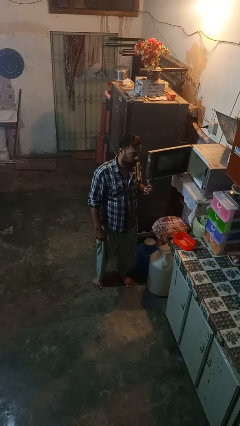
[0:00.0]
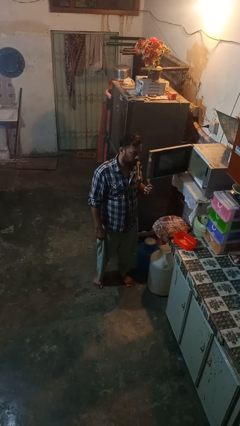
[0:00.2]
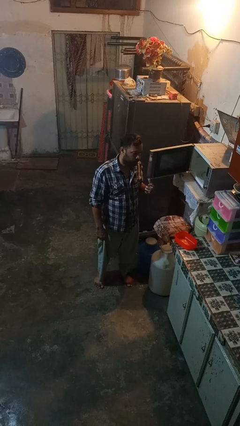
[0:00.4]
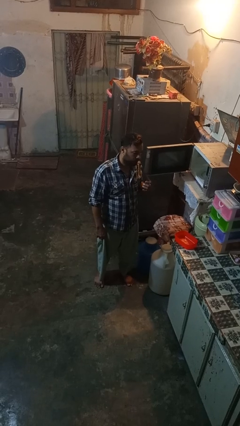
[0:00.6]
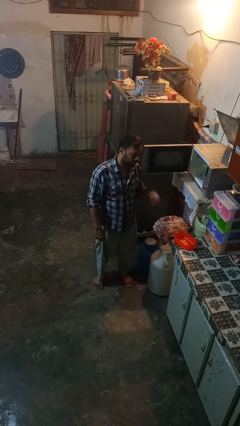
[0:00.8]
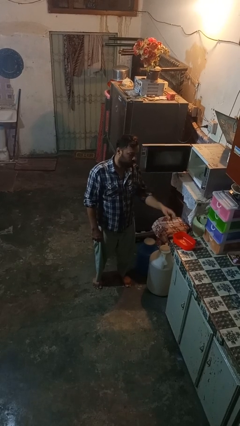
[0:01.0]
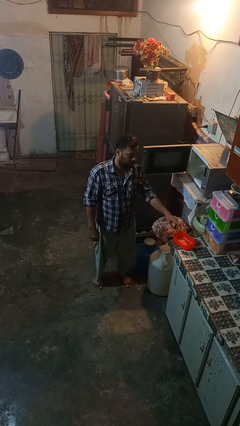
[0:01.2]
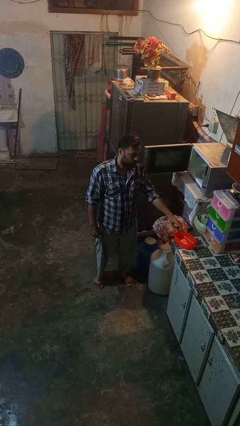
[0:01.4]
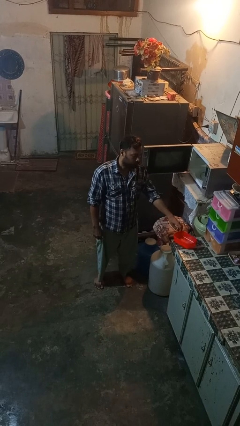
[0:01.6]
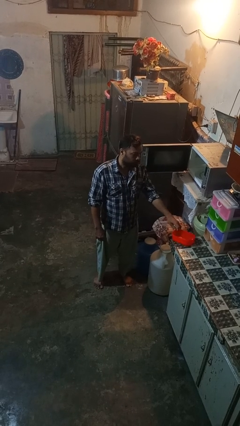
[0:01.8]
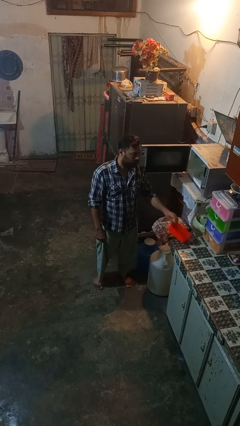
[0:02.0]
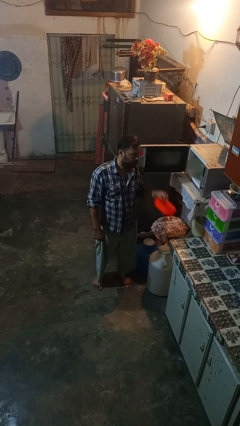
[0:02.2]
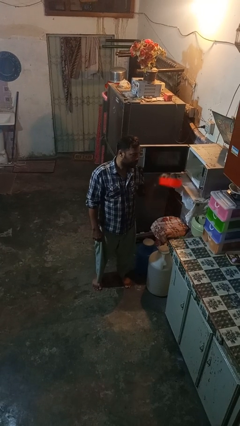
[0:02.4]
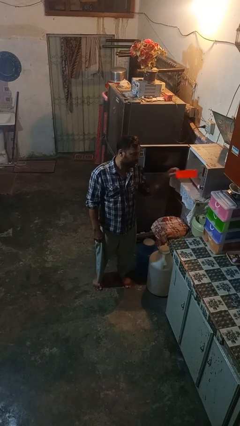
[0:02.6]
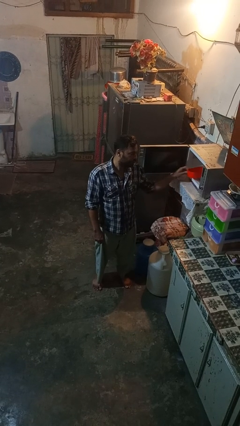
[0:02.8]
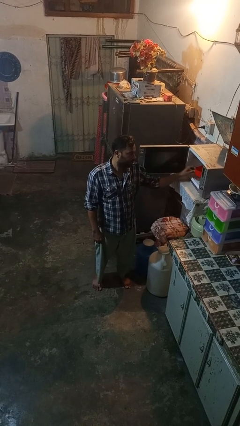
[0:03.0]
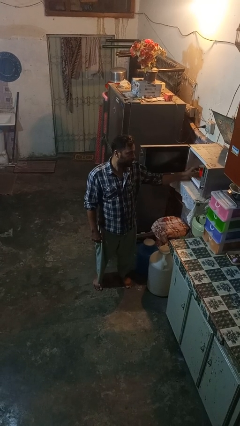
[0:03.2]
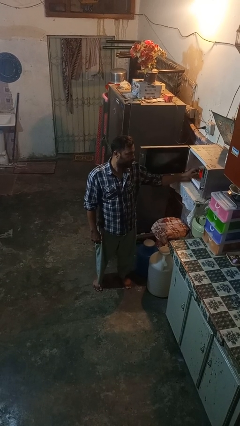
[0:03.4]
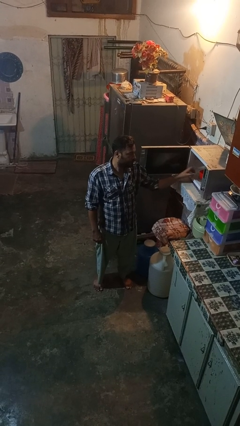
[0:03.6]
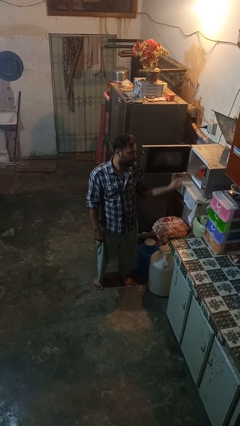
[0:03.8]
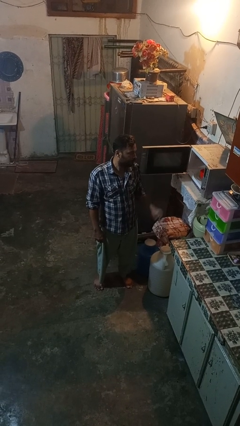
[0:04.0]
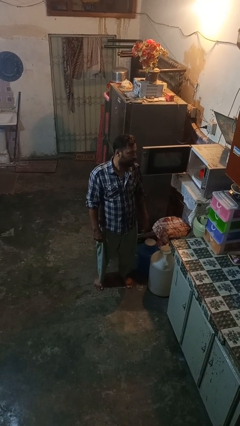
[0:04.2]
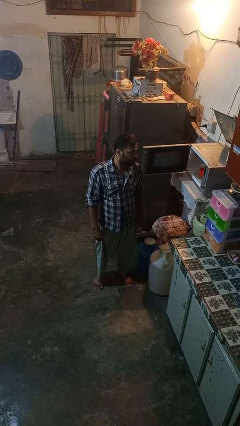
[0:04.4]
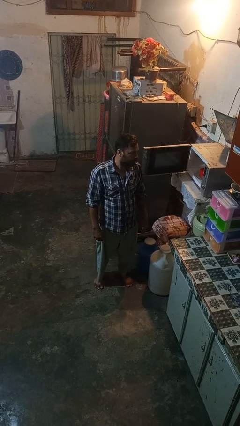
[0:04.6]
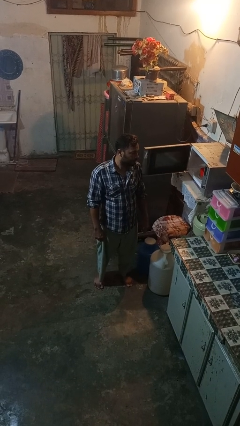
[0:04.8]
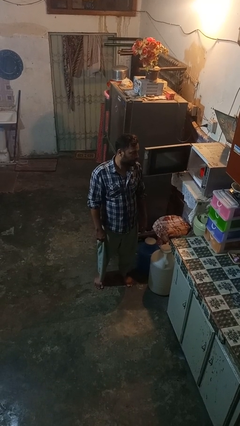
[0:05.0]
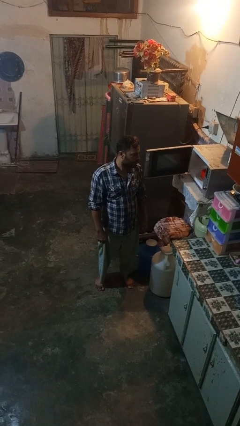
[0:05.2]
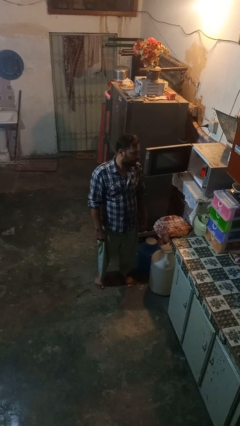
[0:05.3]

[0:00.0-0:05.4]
person puts object into microwave

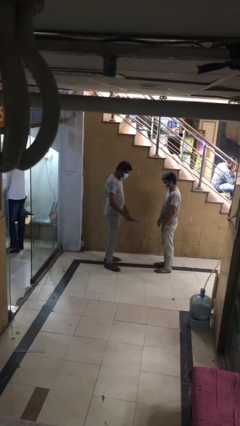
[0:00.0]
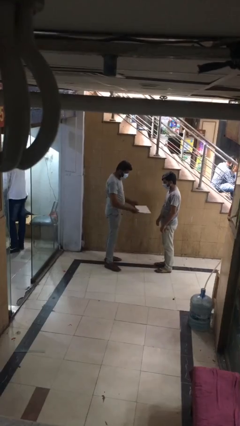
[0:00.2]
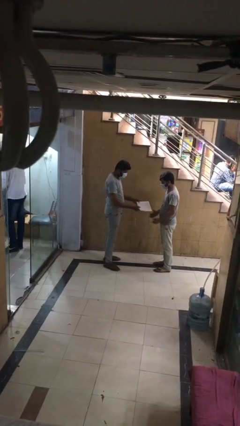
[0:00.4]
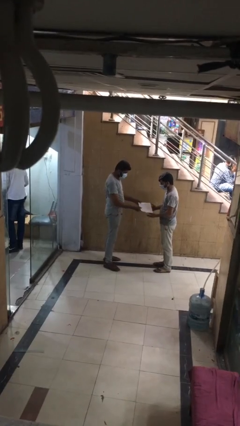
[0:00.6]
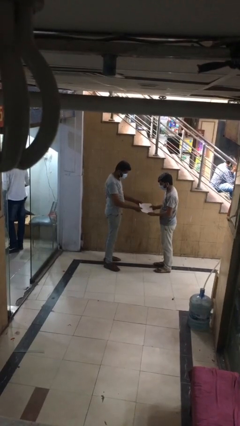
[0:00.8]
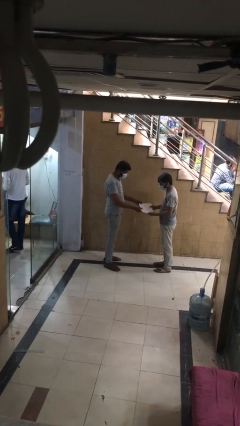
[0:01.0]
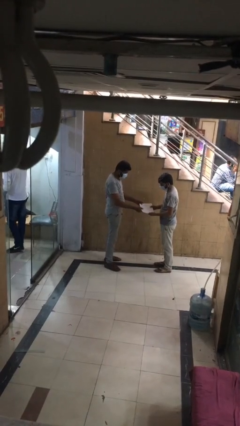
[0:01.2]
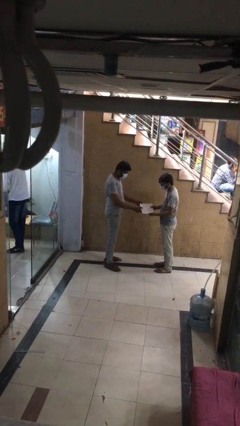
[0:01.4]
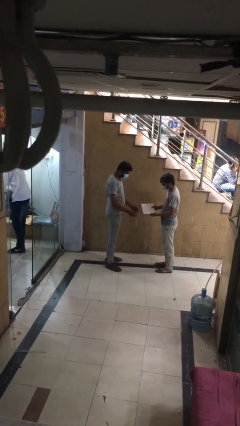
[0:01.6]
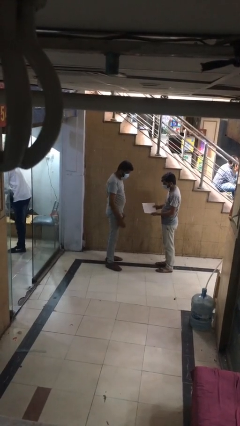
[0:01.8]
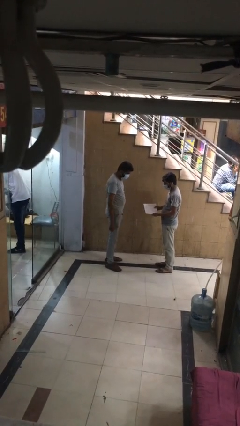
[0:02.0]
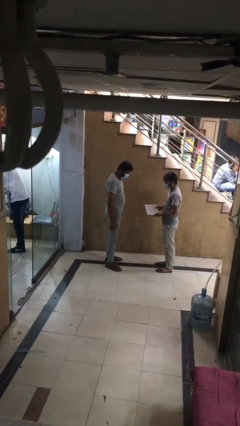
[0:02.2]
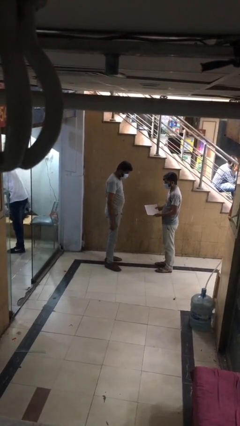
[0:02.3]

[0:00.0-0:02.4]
person transfers object to person

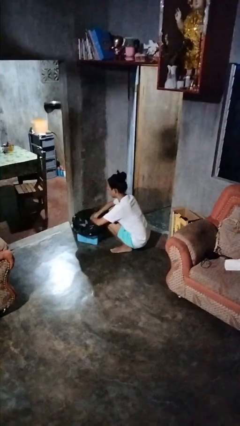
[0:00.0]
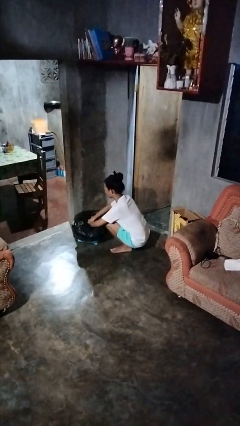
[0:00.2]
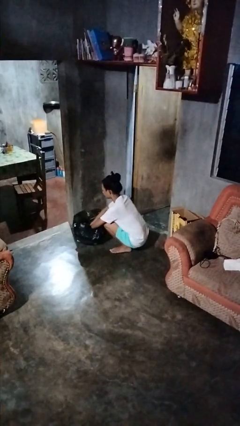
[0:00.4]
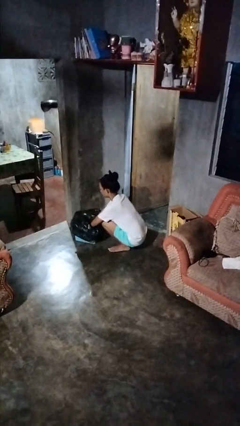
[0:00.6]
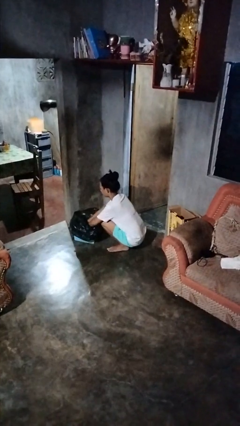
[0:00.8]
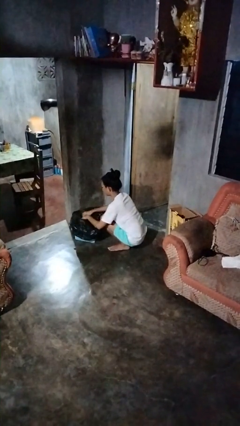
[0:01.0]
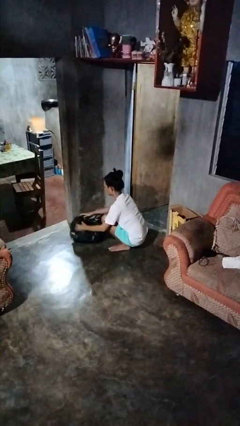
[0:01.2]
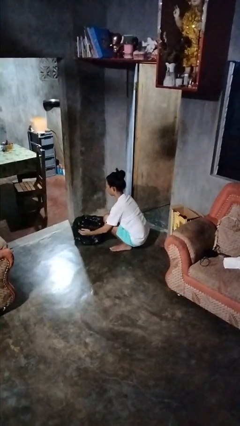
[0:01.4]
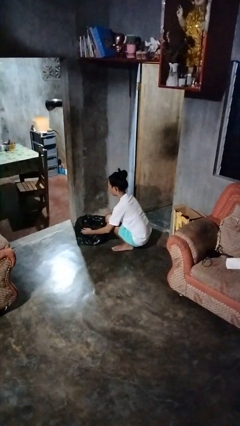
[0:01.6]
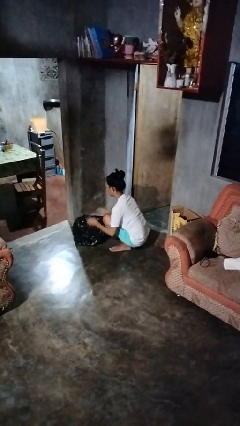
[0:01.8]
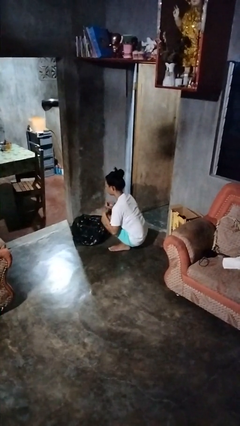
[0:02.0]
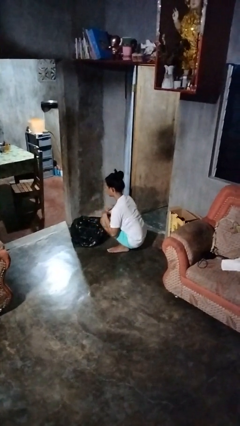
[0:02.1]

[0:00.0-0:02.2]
person inserts trashbag into trashcan

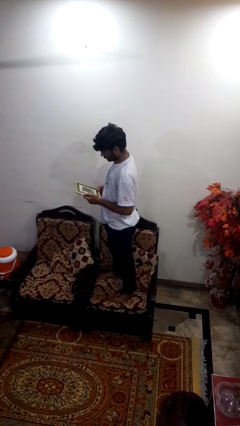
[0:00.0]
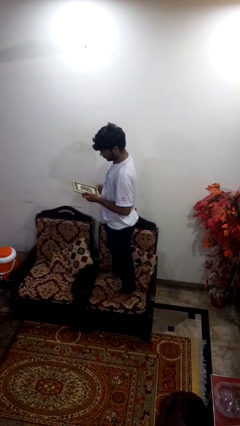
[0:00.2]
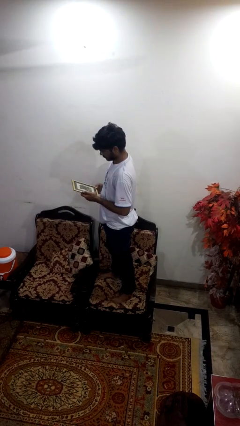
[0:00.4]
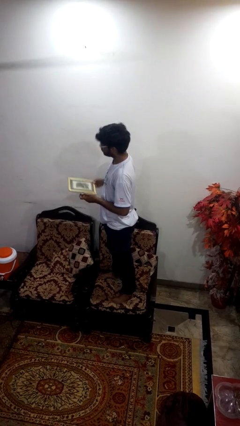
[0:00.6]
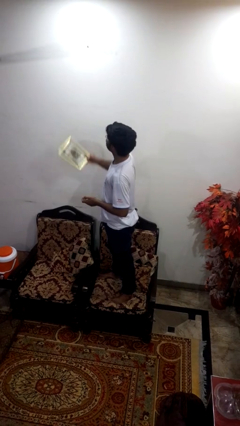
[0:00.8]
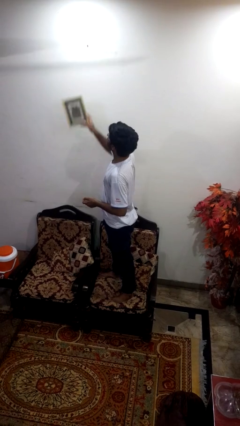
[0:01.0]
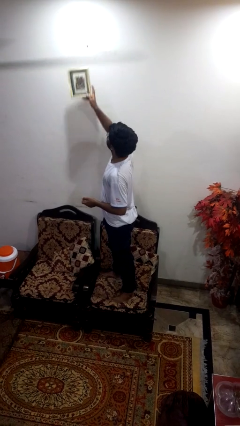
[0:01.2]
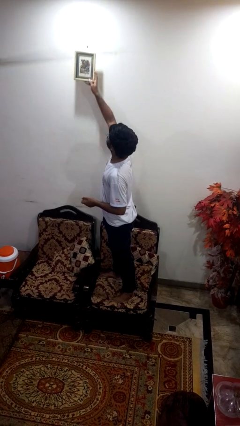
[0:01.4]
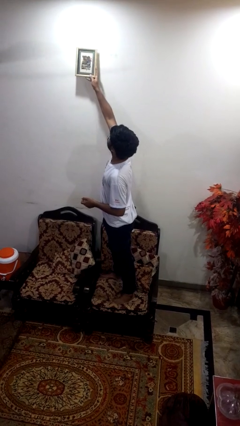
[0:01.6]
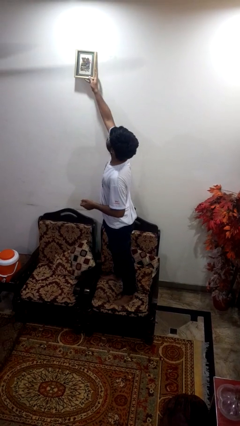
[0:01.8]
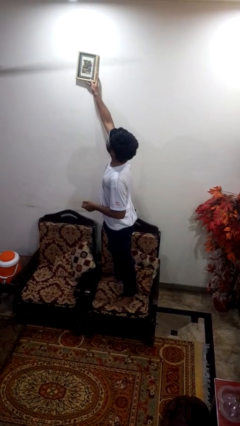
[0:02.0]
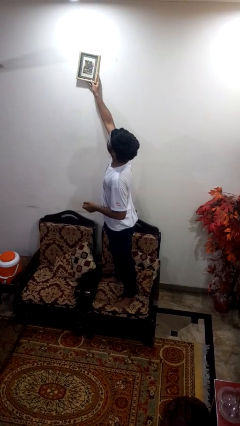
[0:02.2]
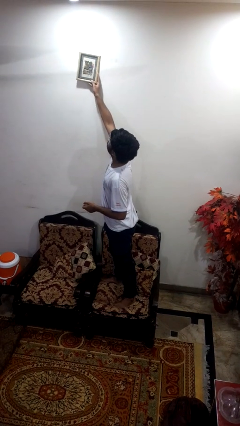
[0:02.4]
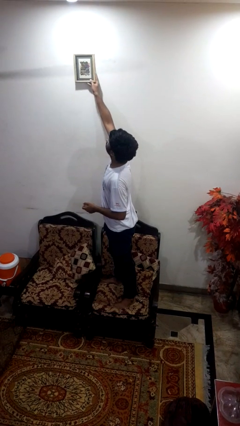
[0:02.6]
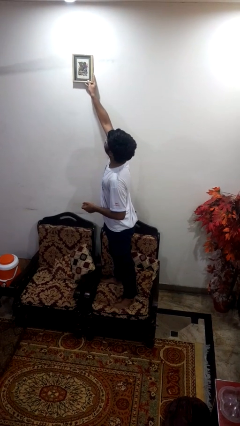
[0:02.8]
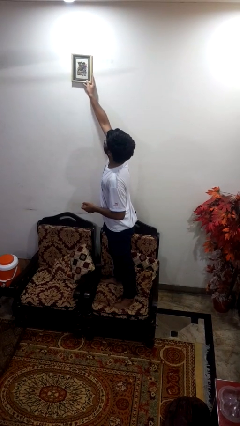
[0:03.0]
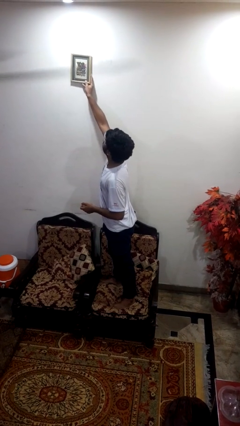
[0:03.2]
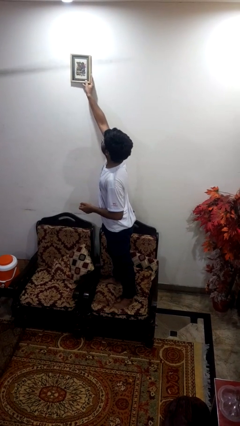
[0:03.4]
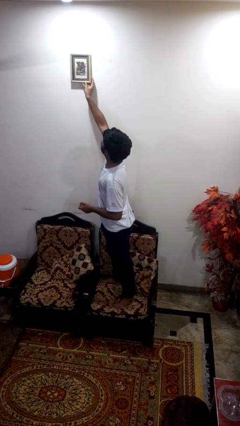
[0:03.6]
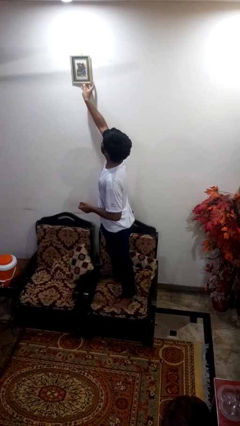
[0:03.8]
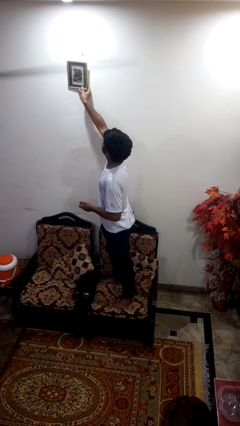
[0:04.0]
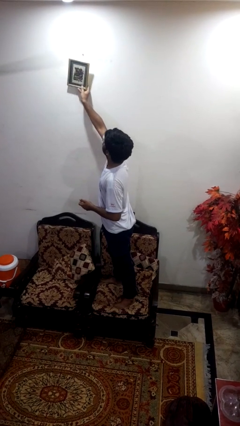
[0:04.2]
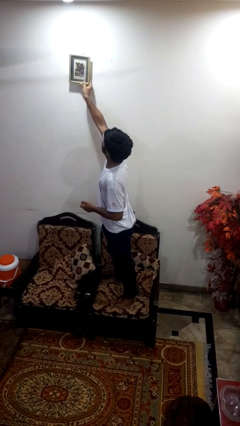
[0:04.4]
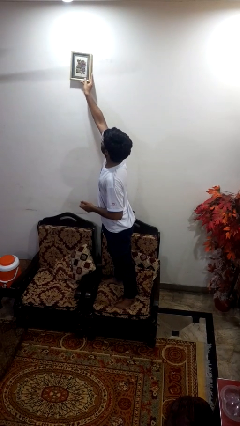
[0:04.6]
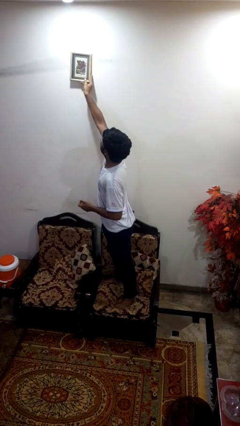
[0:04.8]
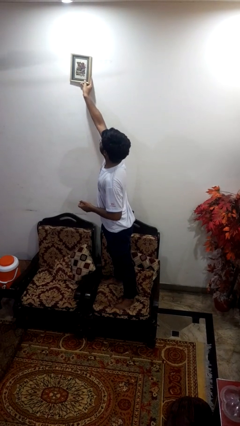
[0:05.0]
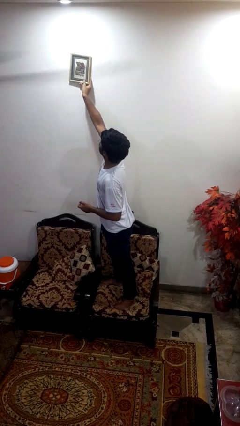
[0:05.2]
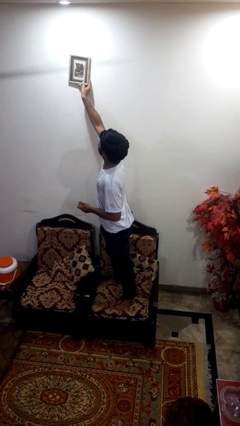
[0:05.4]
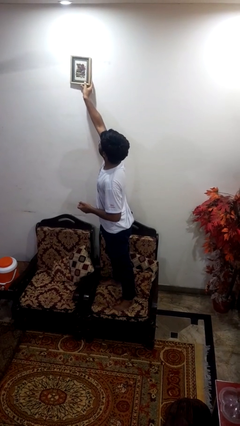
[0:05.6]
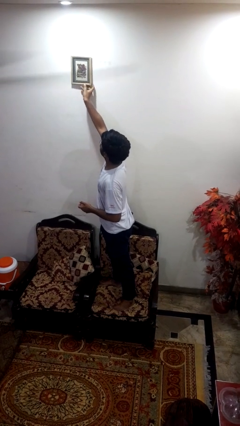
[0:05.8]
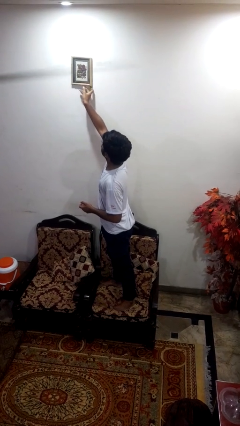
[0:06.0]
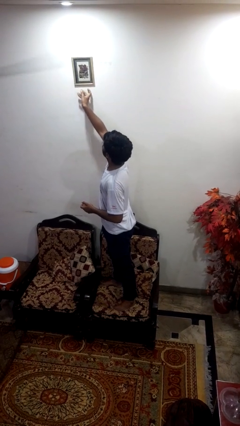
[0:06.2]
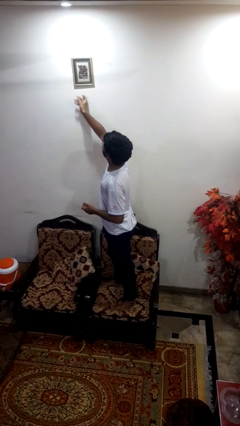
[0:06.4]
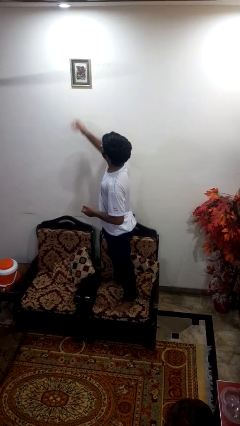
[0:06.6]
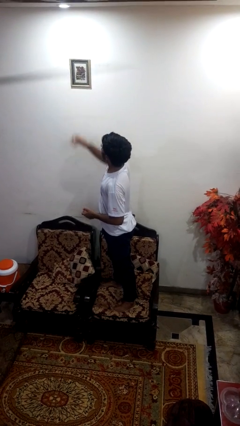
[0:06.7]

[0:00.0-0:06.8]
person puts up picture frame

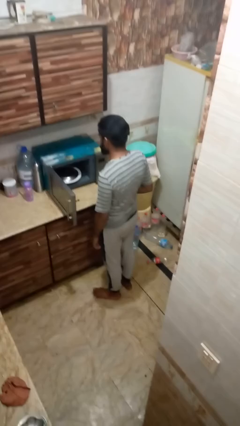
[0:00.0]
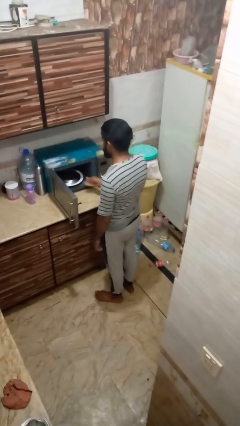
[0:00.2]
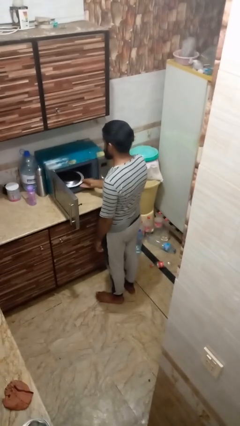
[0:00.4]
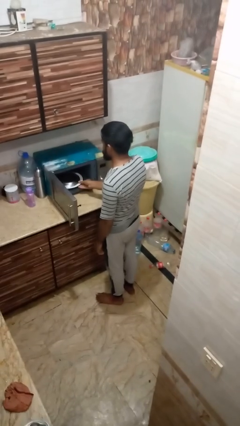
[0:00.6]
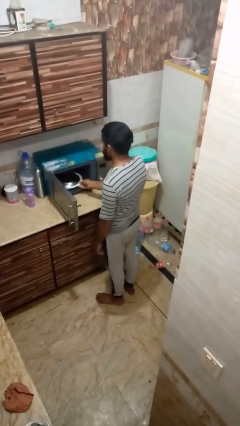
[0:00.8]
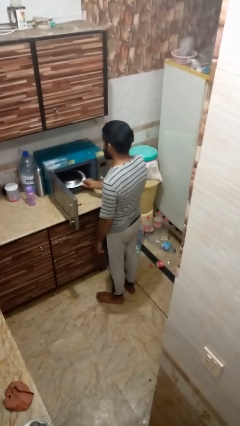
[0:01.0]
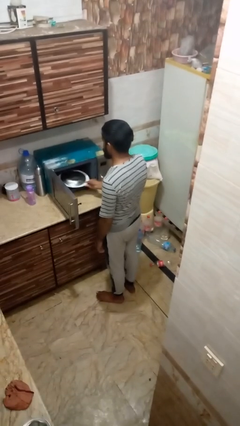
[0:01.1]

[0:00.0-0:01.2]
person takes object from oven
